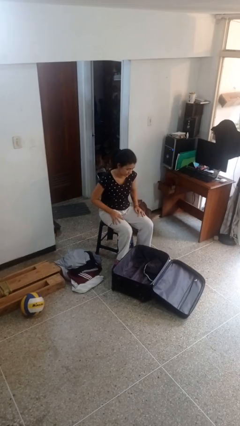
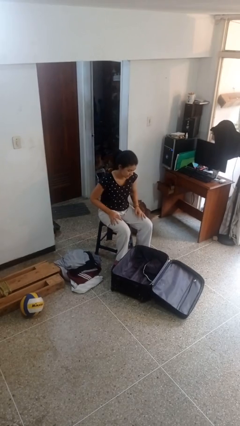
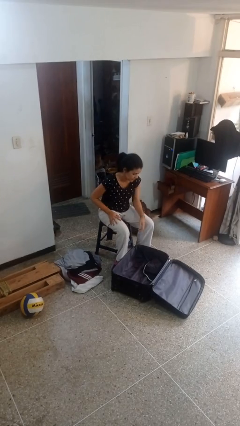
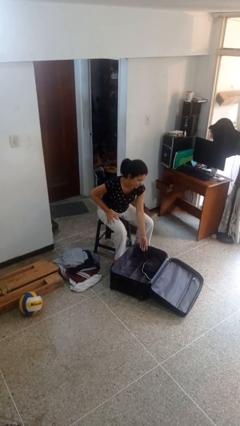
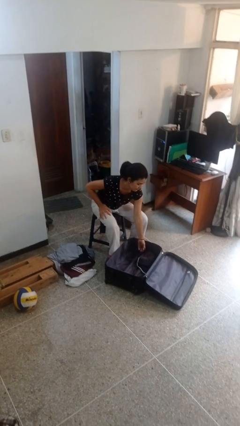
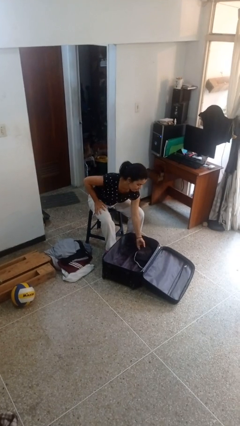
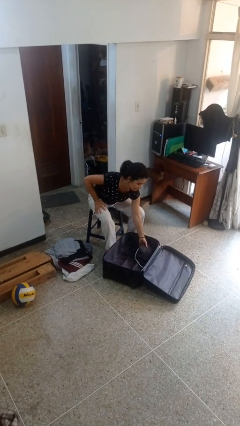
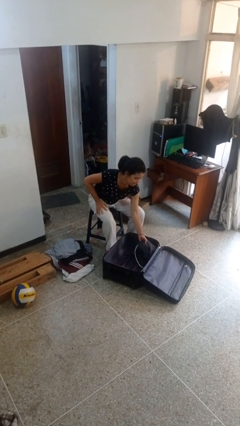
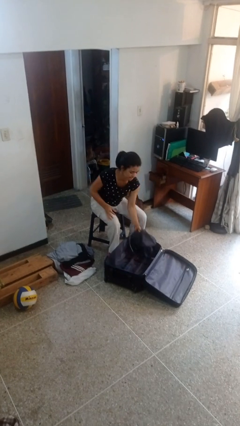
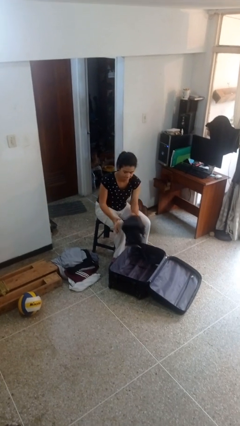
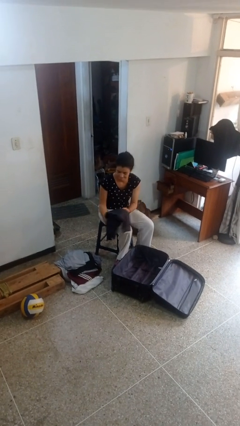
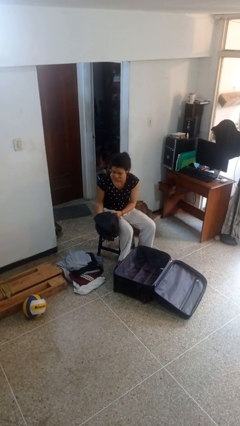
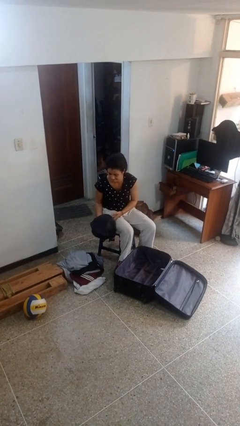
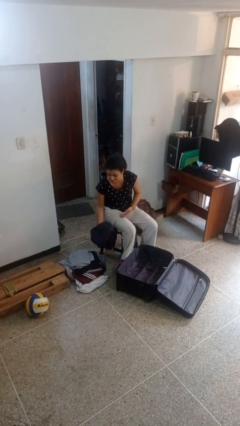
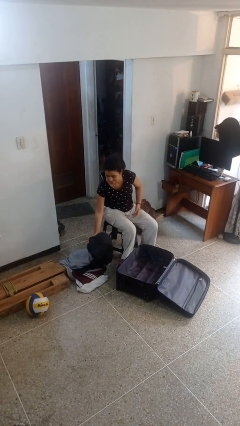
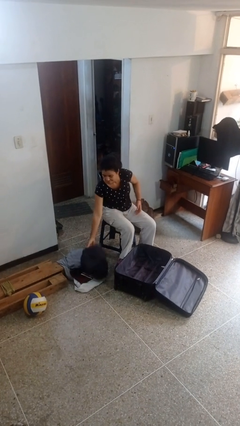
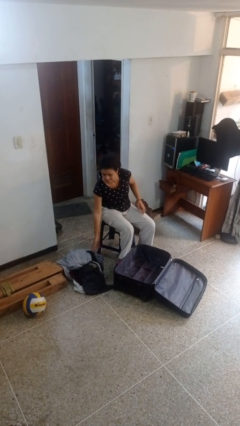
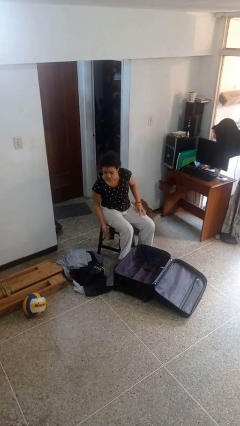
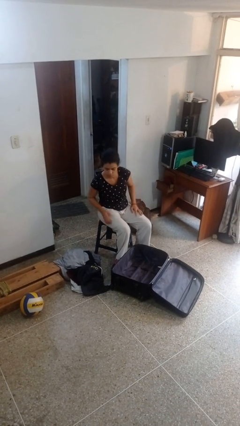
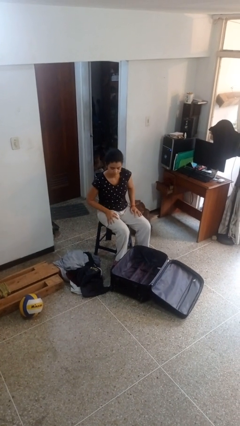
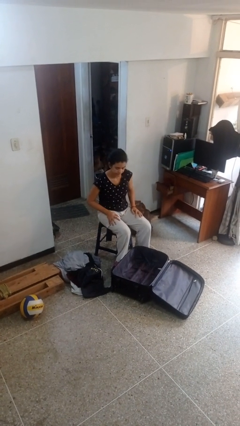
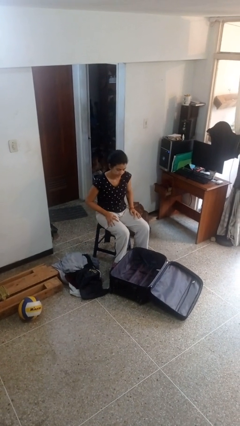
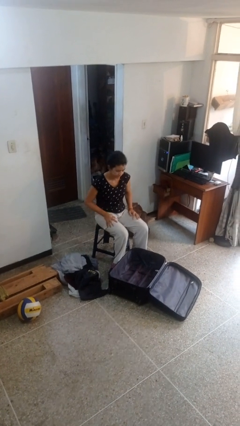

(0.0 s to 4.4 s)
person unloads clothes from suitcase

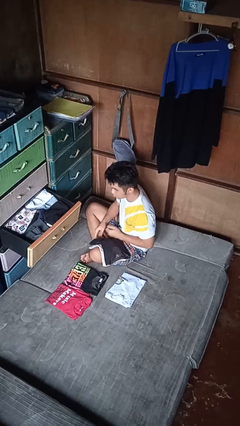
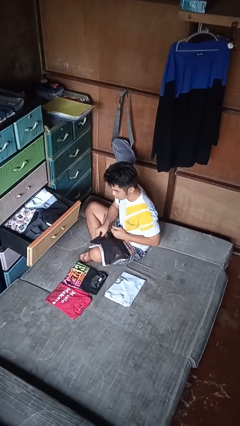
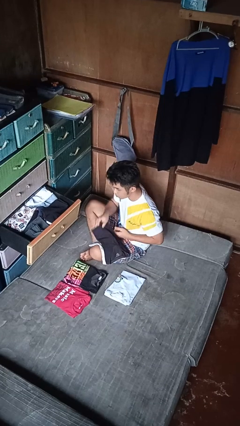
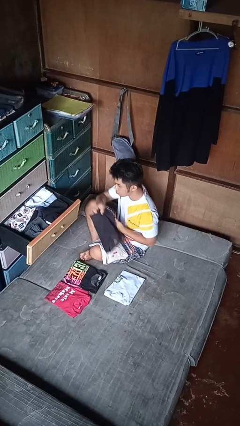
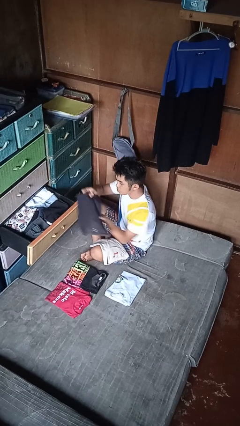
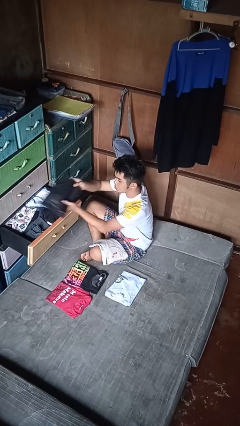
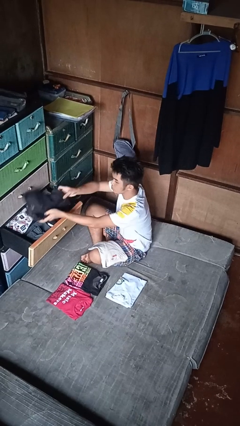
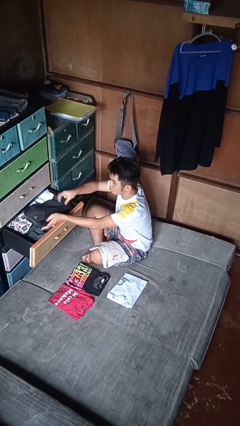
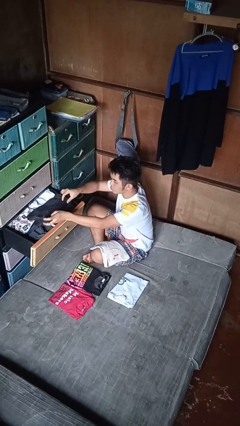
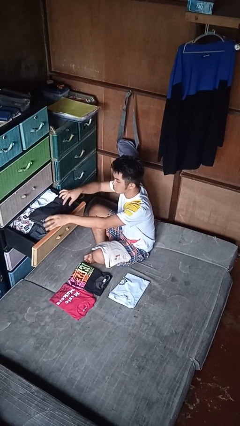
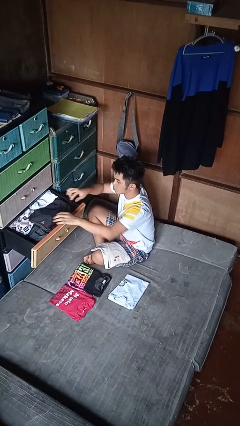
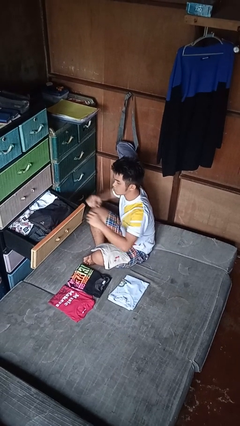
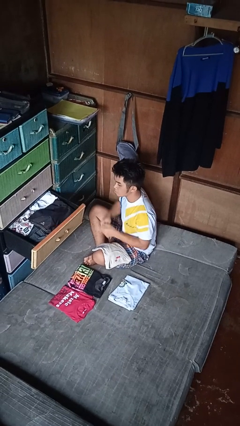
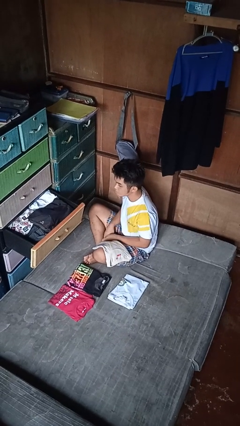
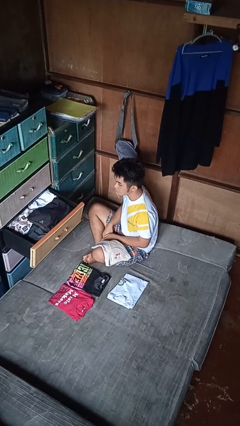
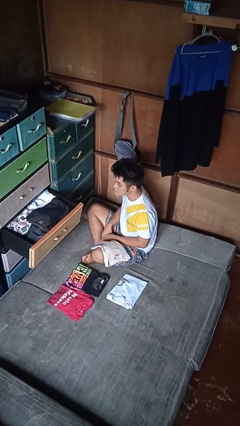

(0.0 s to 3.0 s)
person puts clothes into dresser

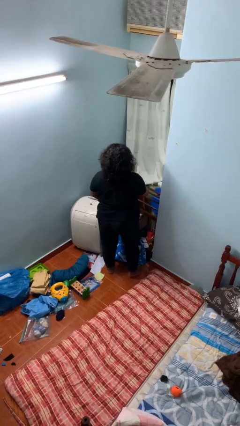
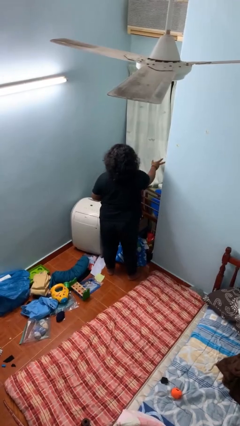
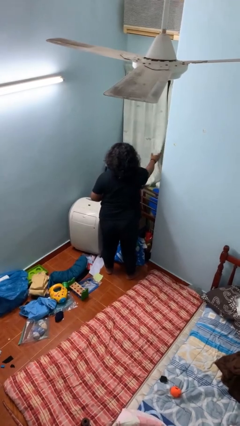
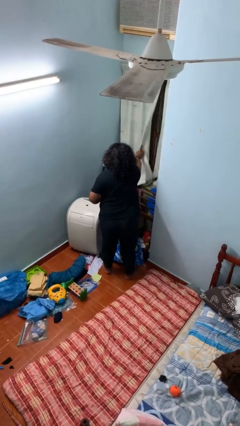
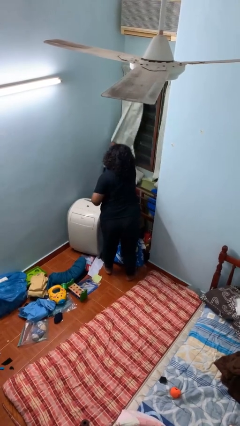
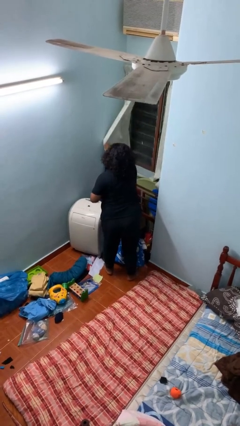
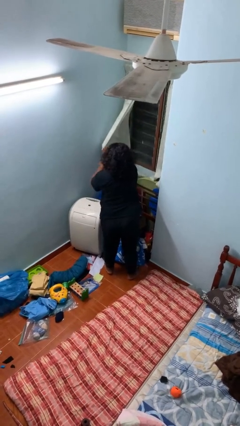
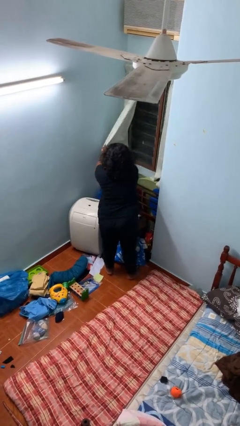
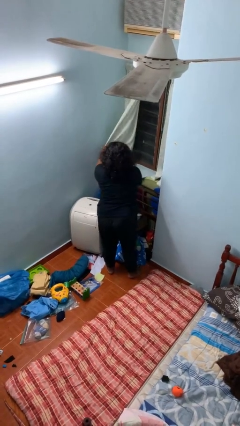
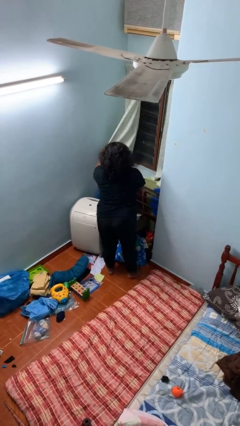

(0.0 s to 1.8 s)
person opens curtains

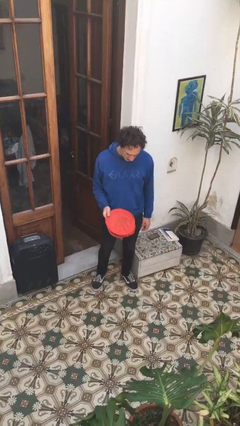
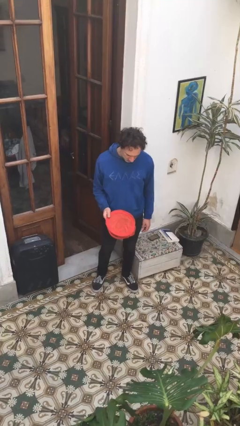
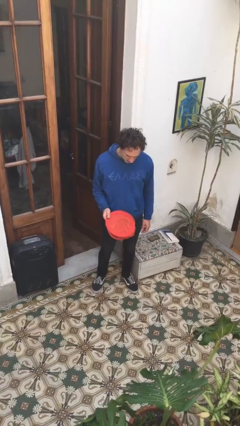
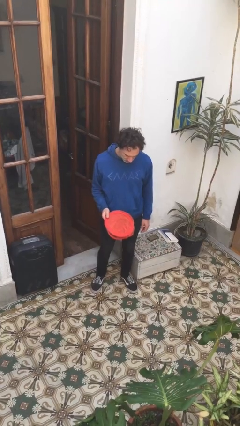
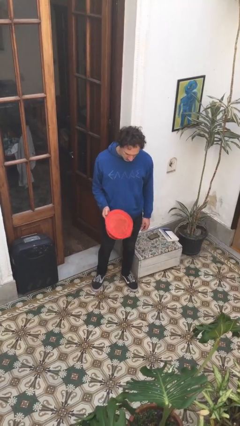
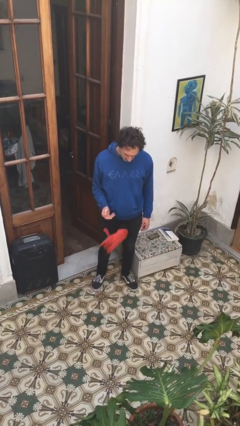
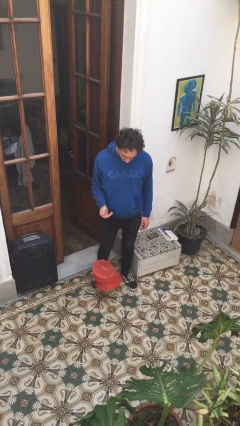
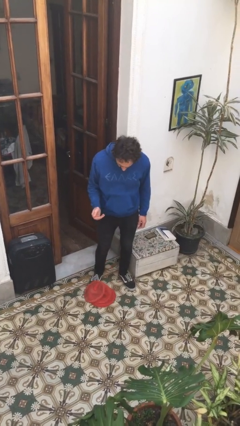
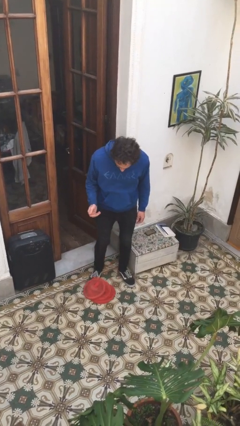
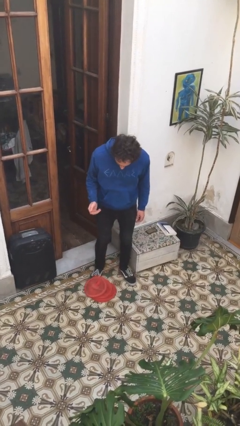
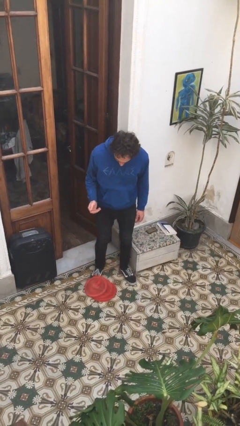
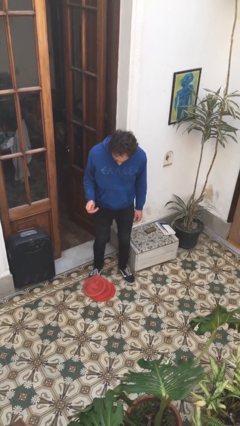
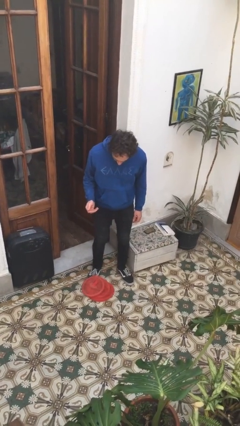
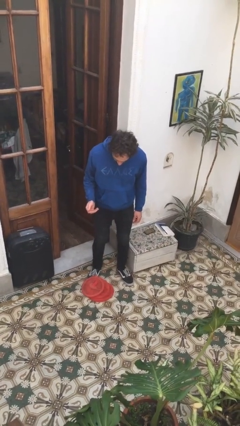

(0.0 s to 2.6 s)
person drops object

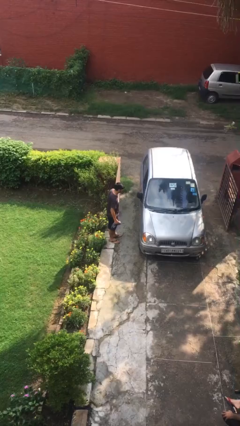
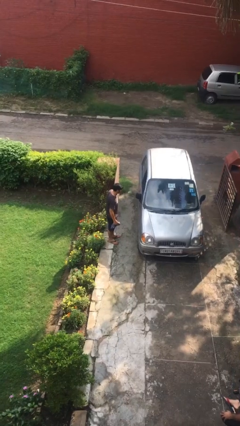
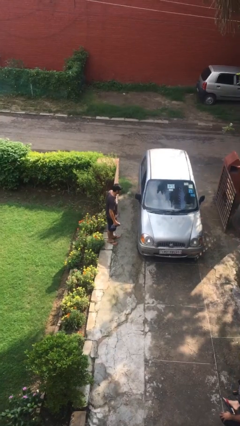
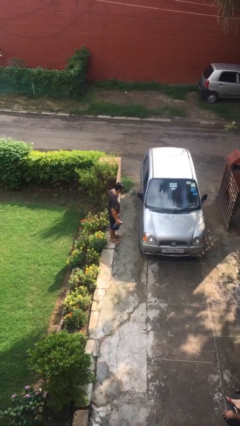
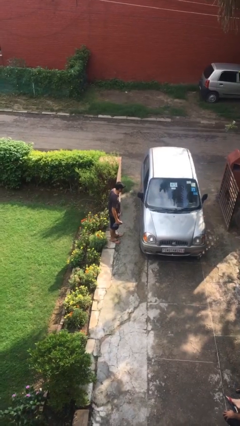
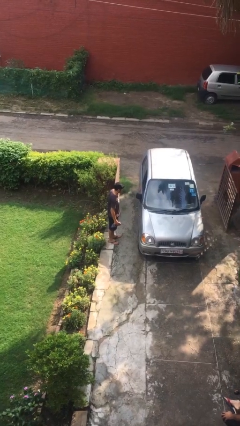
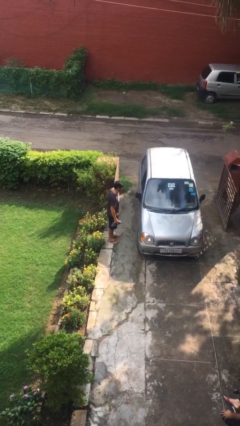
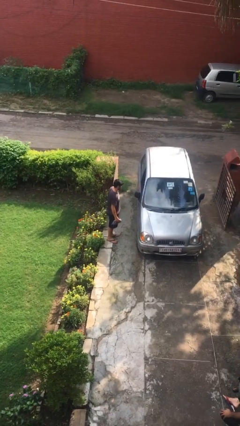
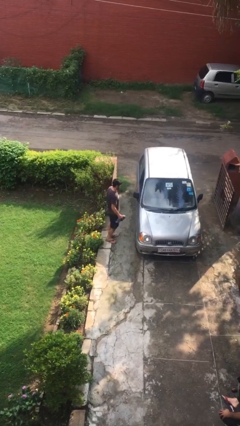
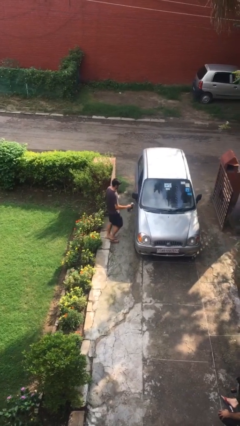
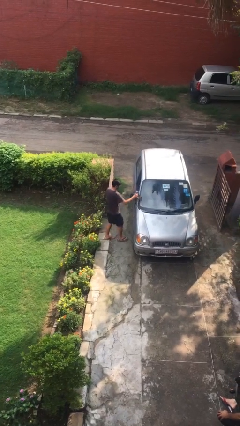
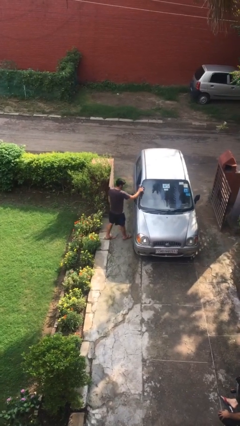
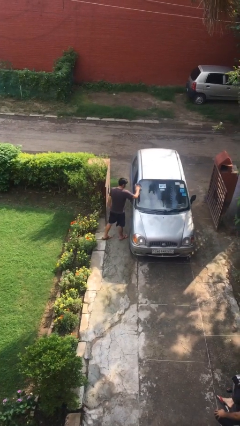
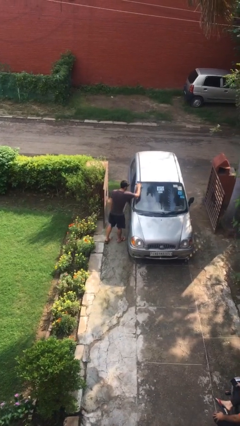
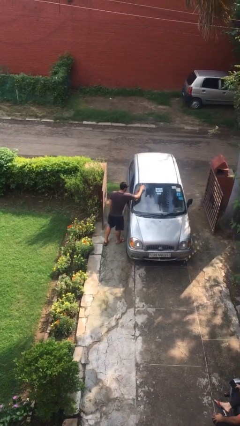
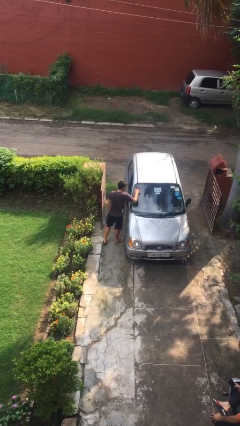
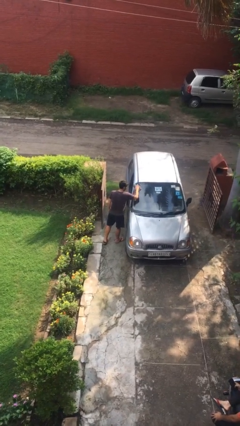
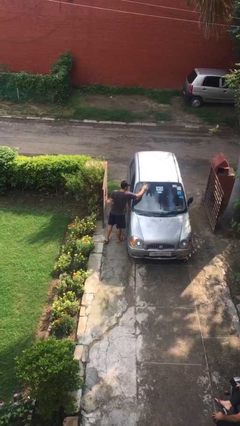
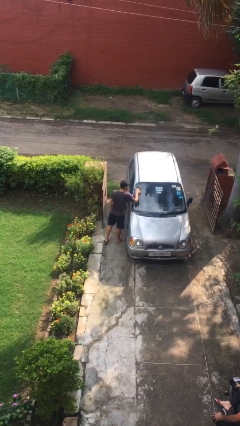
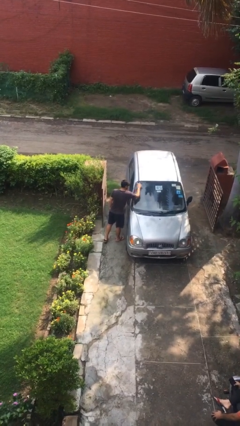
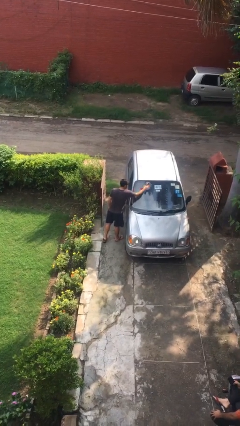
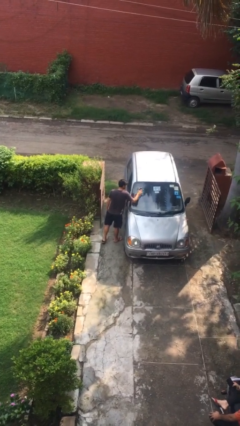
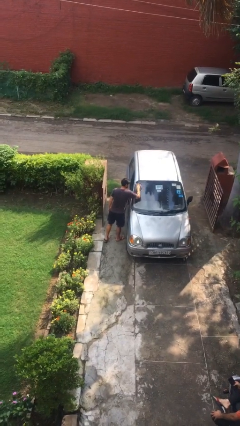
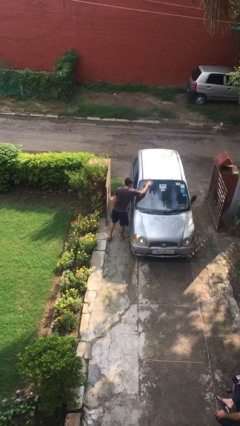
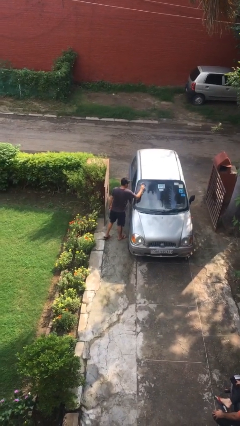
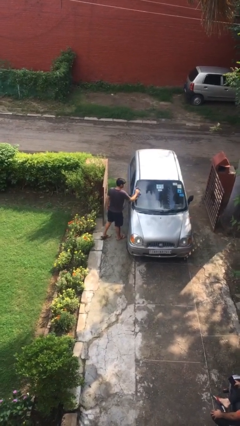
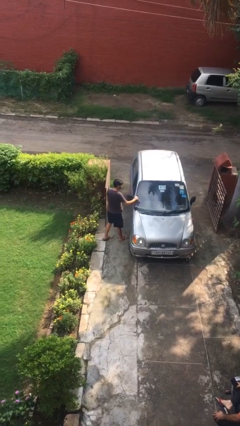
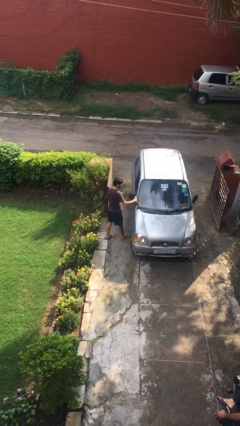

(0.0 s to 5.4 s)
person polishes car with rag

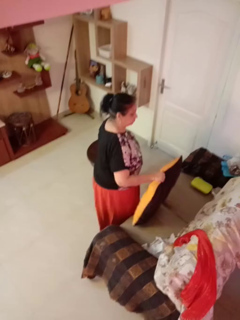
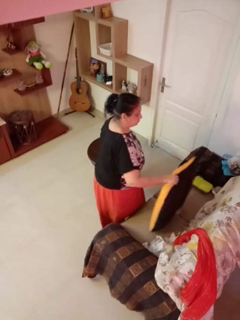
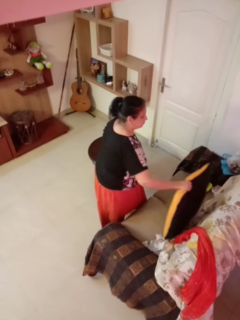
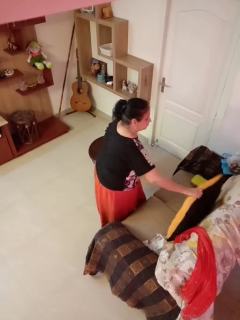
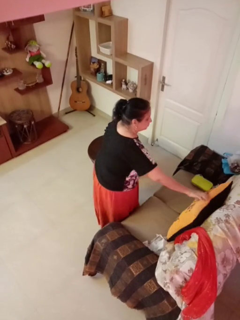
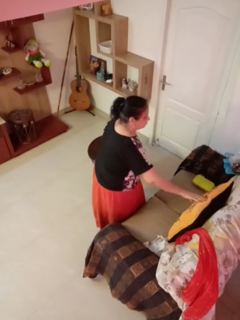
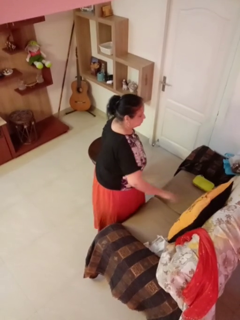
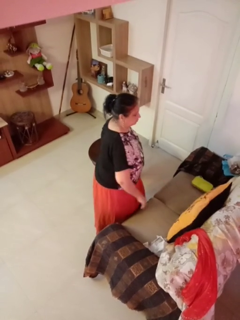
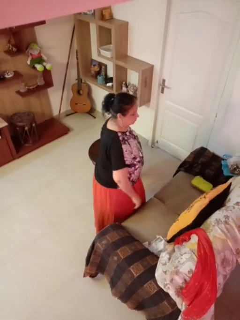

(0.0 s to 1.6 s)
person puts down object on couch
